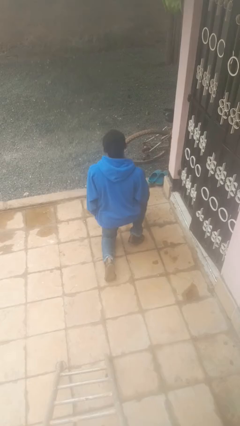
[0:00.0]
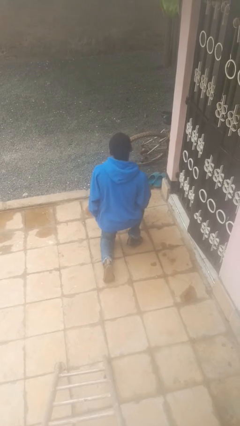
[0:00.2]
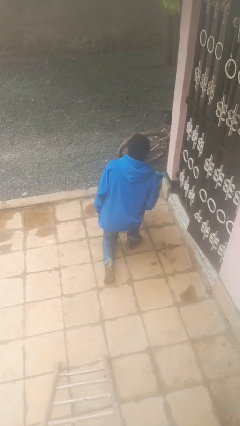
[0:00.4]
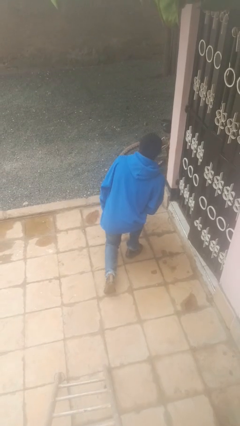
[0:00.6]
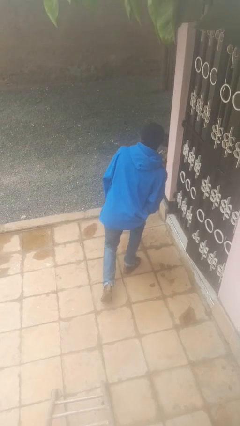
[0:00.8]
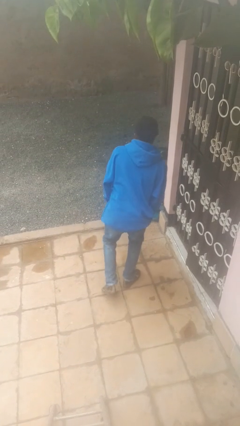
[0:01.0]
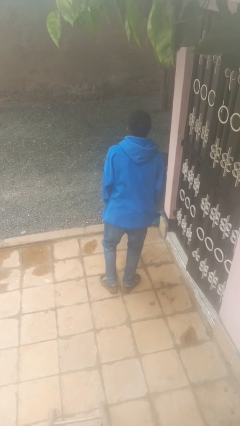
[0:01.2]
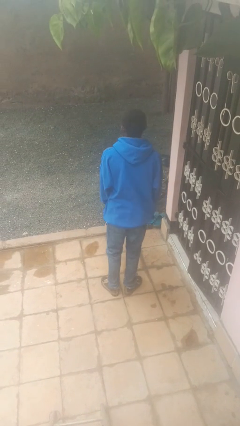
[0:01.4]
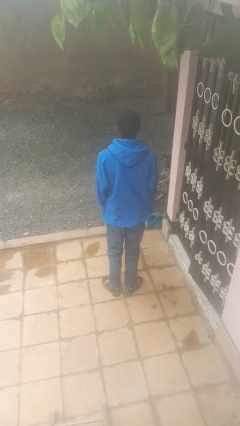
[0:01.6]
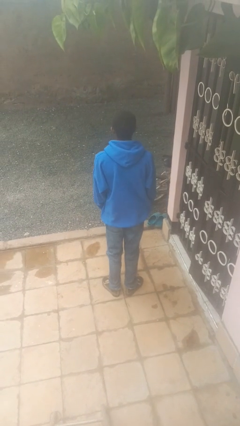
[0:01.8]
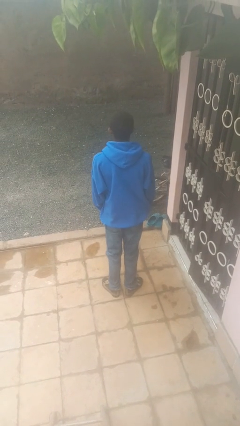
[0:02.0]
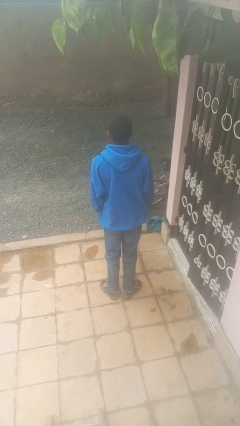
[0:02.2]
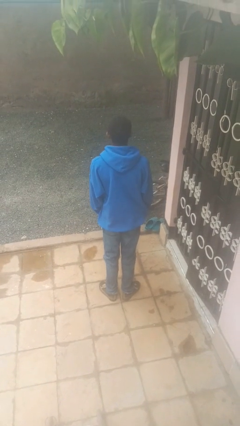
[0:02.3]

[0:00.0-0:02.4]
person stands up from floor

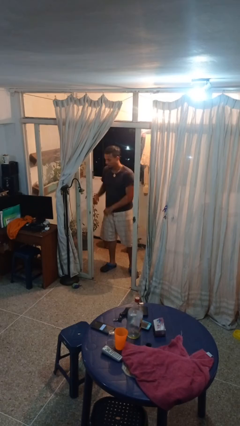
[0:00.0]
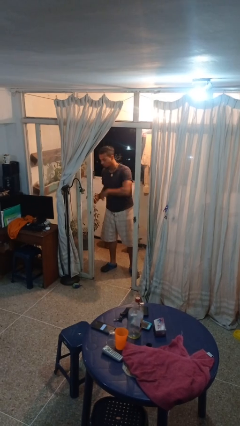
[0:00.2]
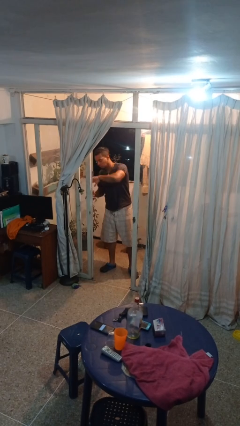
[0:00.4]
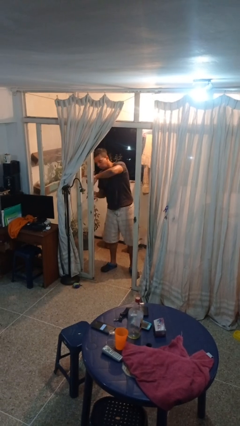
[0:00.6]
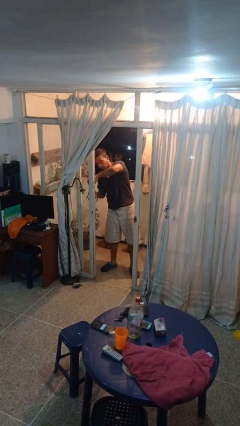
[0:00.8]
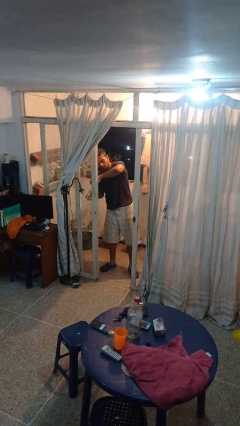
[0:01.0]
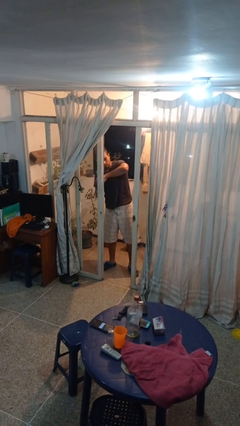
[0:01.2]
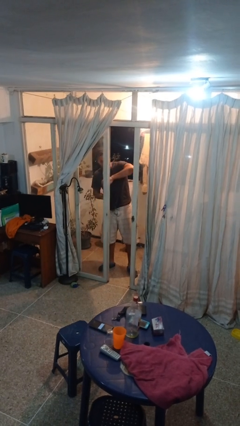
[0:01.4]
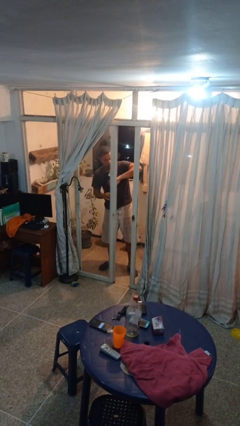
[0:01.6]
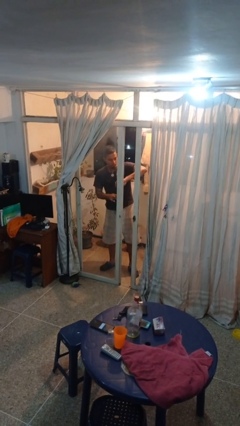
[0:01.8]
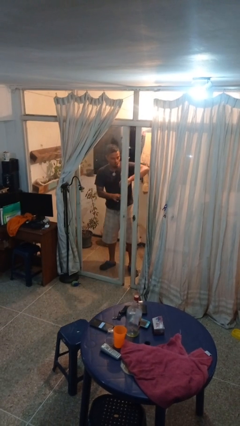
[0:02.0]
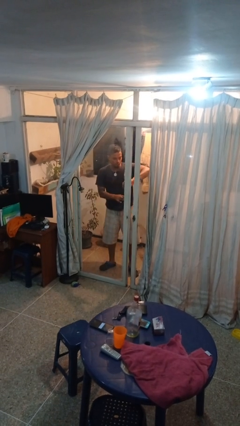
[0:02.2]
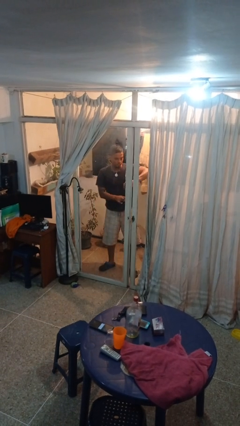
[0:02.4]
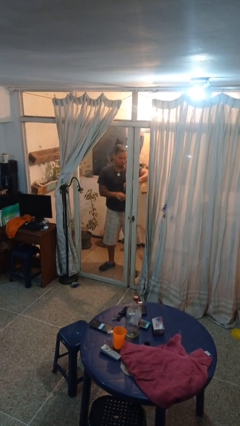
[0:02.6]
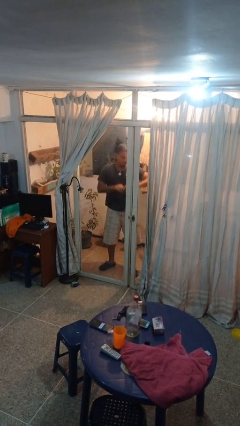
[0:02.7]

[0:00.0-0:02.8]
person closes sliding door

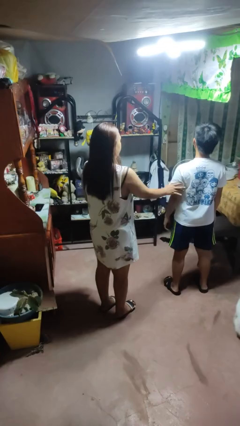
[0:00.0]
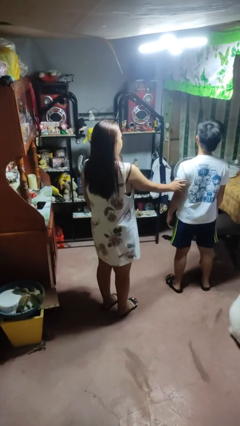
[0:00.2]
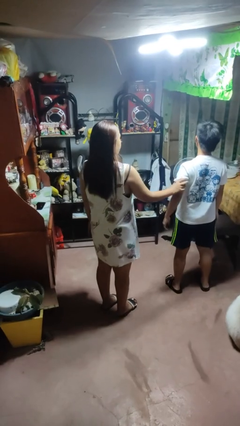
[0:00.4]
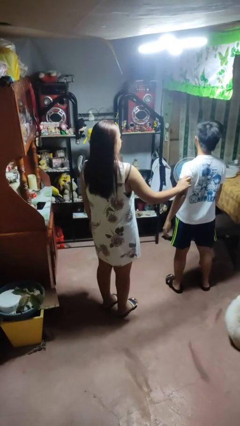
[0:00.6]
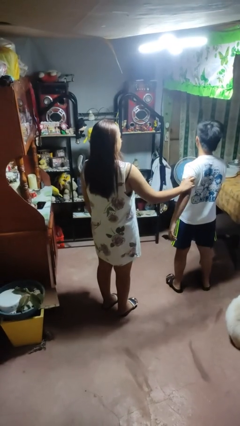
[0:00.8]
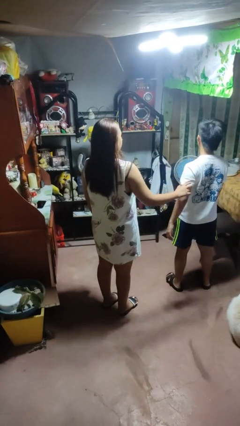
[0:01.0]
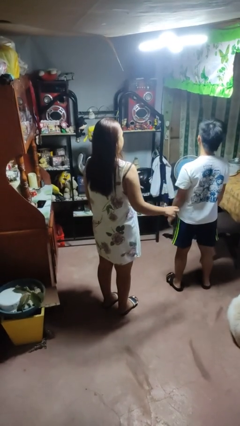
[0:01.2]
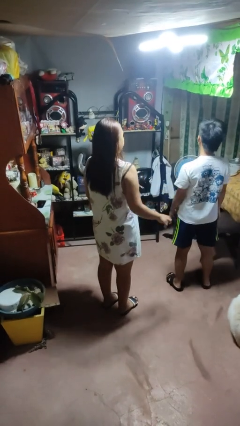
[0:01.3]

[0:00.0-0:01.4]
person grabs person by bicep

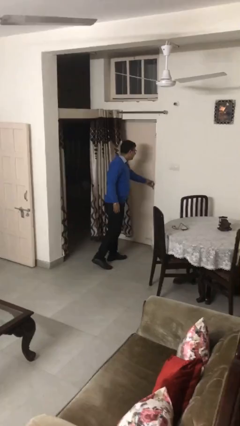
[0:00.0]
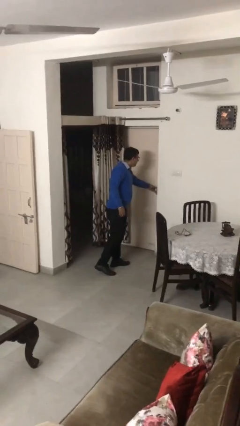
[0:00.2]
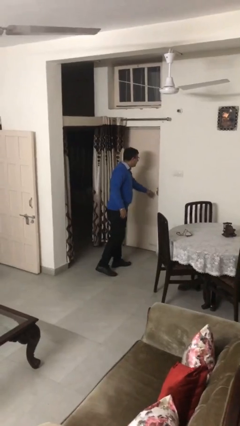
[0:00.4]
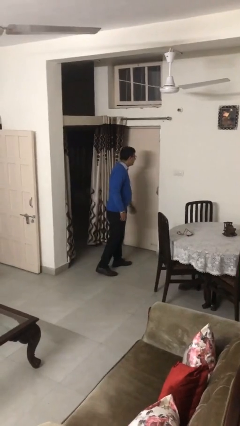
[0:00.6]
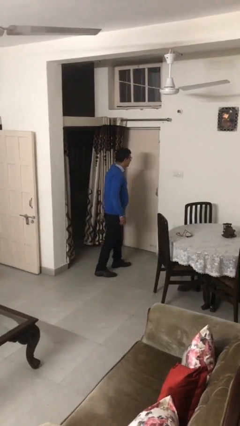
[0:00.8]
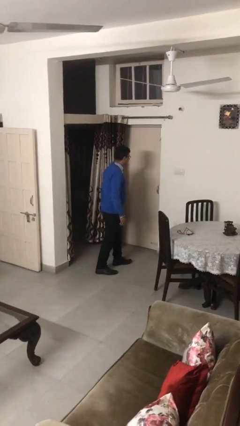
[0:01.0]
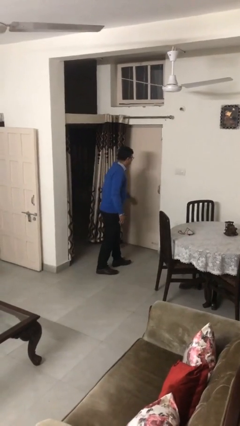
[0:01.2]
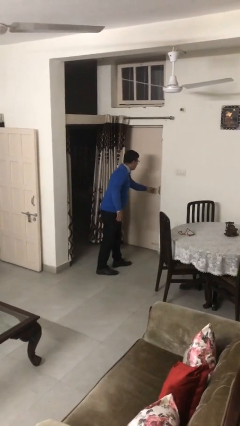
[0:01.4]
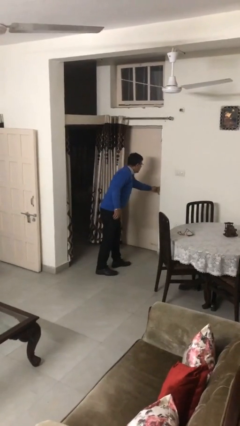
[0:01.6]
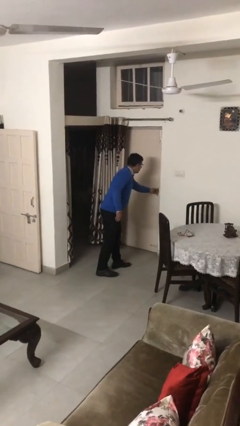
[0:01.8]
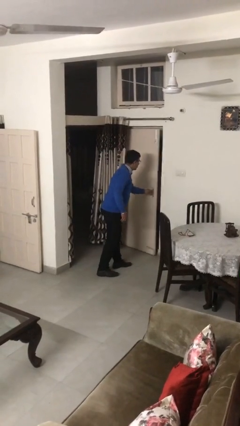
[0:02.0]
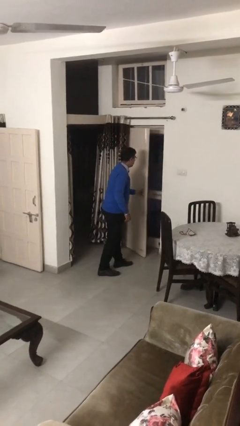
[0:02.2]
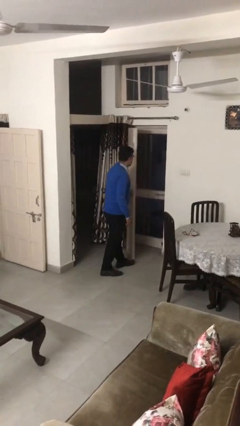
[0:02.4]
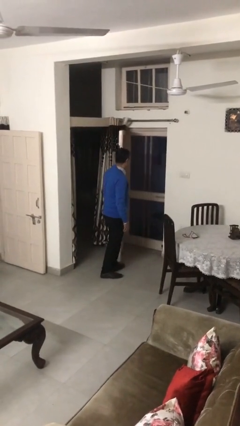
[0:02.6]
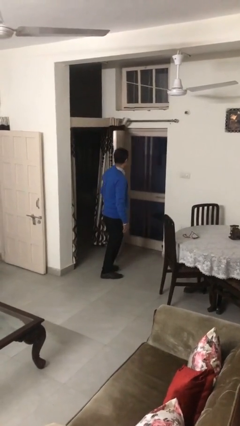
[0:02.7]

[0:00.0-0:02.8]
person opens facility door

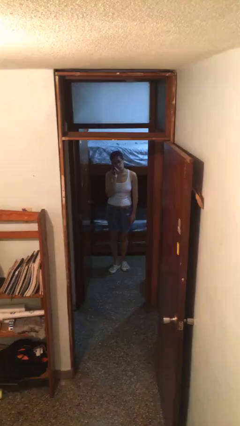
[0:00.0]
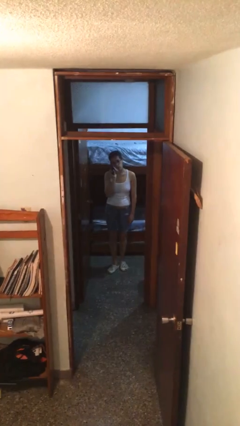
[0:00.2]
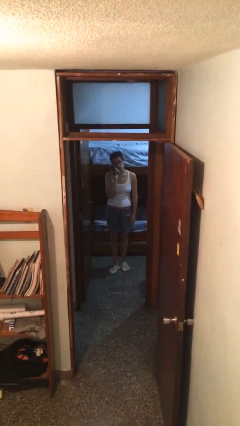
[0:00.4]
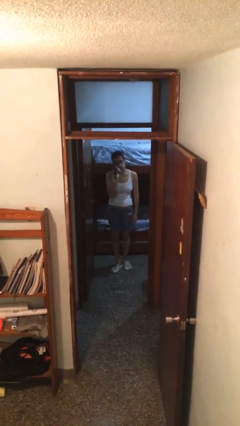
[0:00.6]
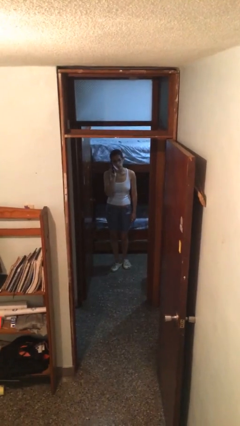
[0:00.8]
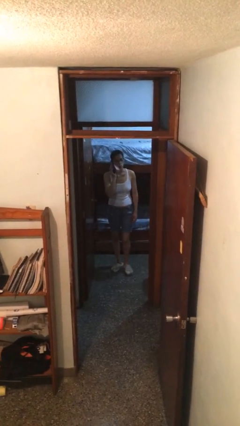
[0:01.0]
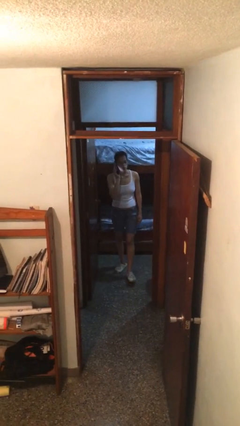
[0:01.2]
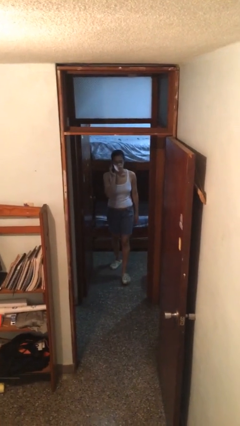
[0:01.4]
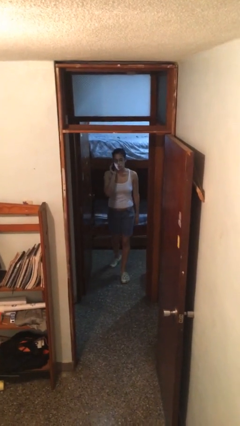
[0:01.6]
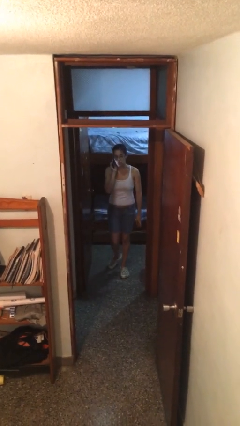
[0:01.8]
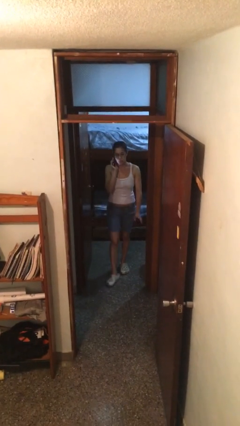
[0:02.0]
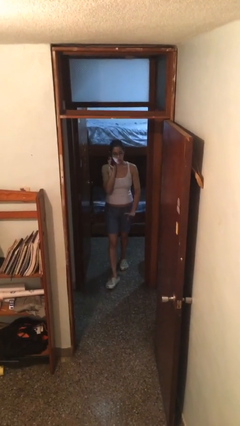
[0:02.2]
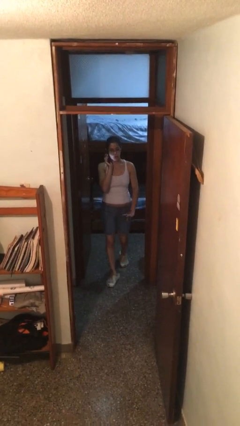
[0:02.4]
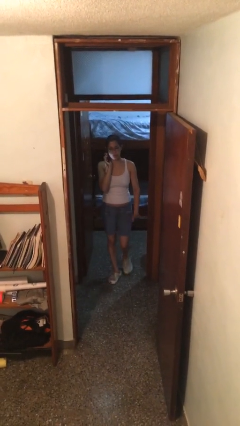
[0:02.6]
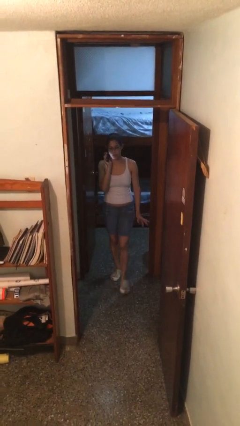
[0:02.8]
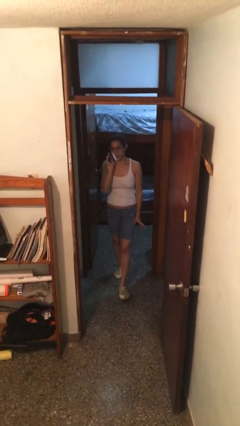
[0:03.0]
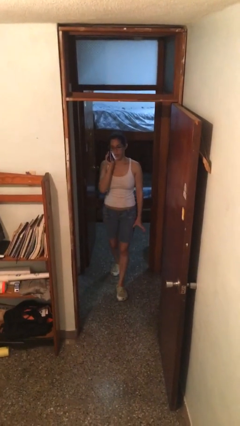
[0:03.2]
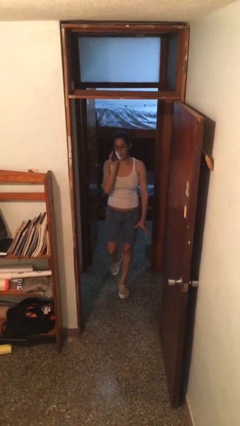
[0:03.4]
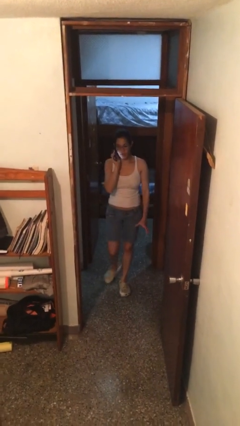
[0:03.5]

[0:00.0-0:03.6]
person enters scene through structure

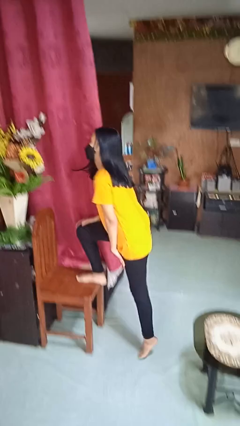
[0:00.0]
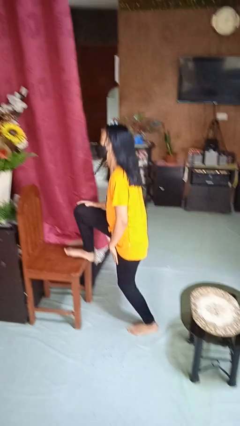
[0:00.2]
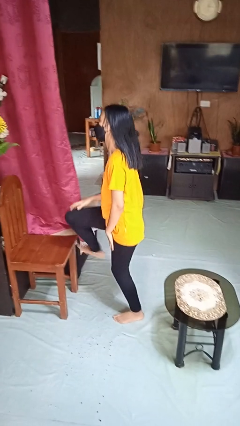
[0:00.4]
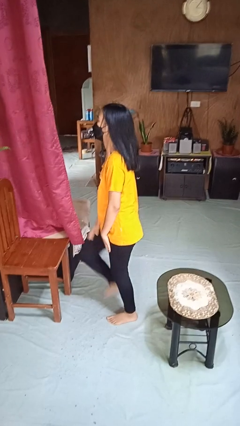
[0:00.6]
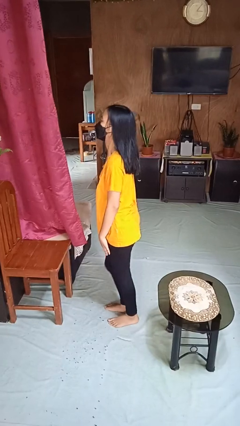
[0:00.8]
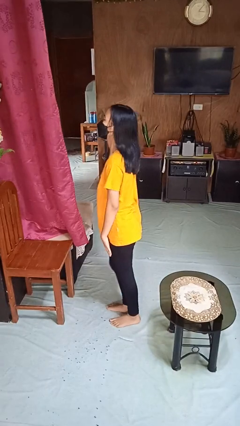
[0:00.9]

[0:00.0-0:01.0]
person climbs off chair

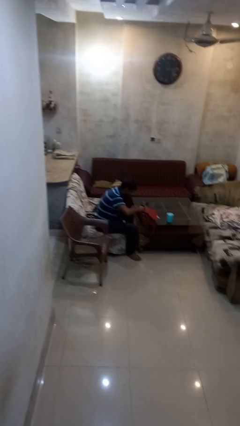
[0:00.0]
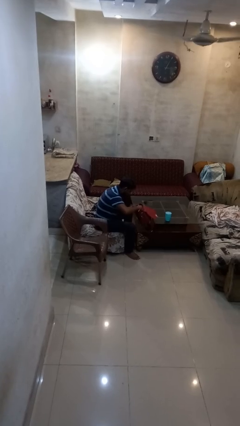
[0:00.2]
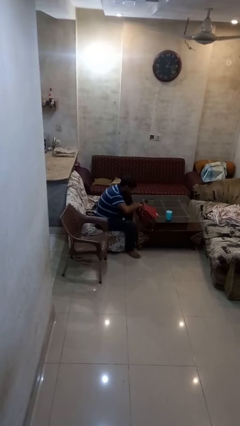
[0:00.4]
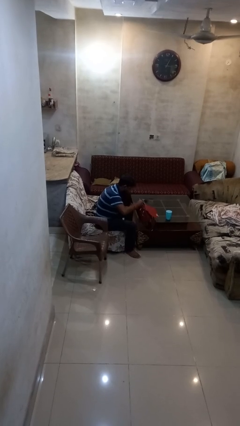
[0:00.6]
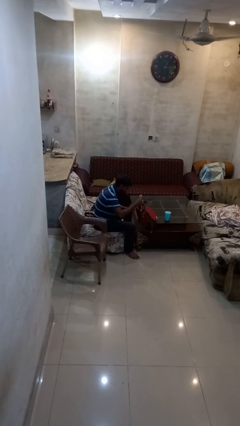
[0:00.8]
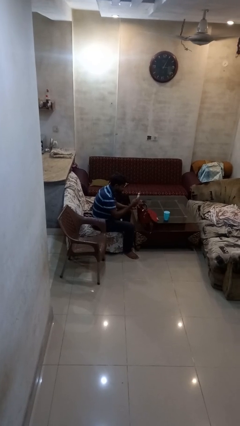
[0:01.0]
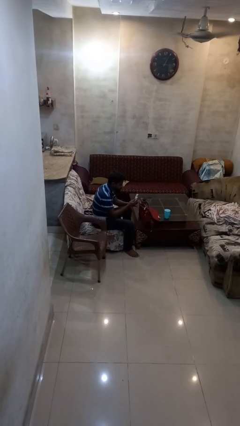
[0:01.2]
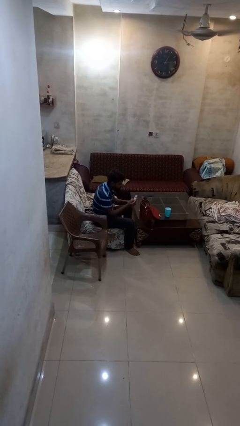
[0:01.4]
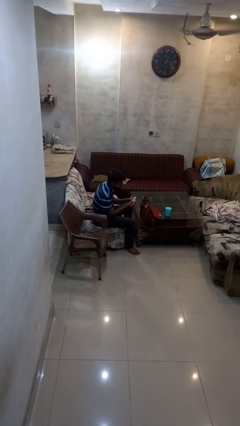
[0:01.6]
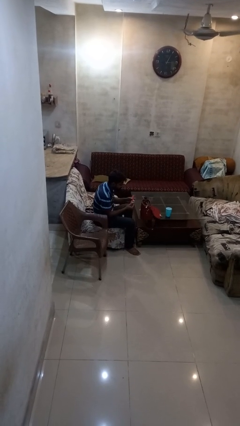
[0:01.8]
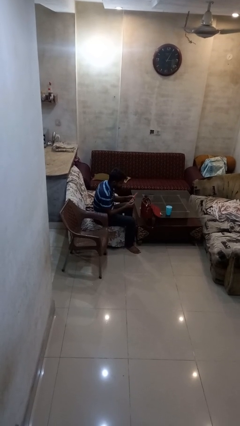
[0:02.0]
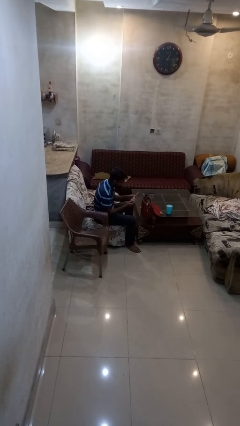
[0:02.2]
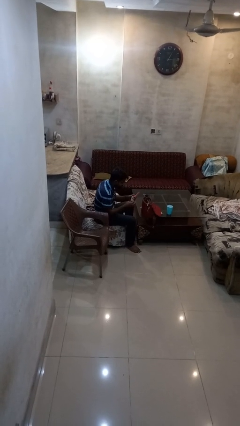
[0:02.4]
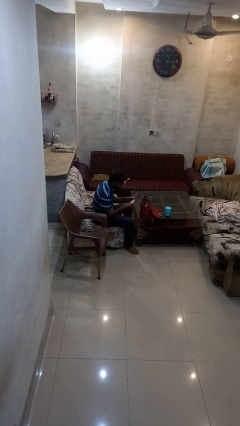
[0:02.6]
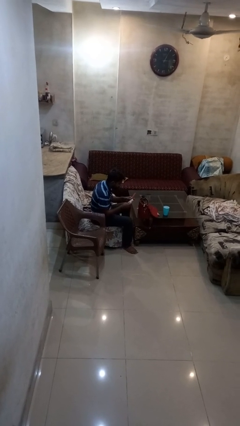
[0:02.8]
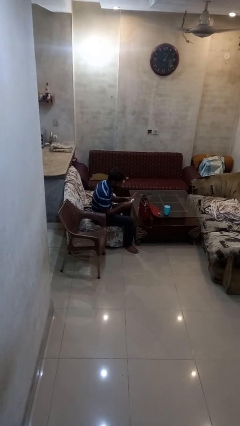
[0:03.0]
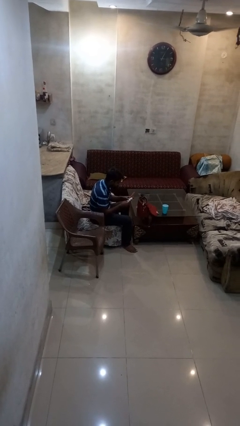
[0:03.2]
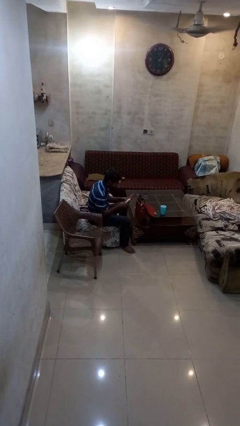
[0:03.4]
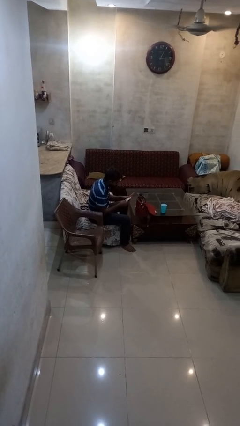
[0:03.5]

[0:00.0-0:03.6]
person takes object from purse
